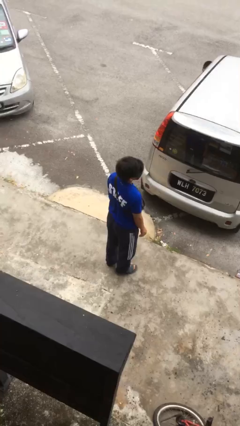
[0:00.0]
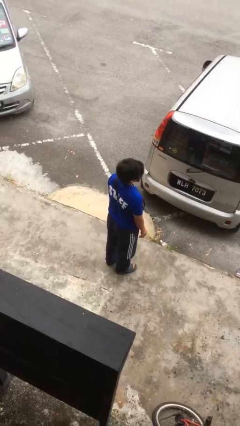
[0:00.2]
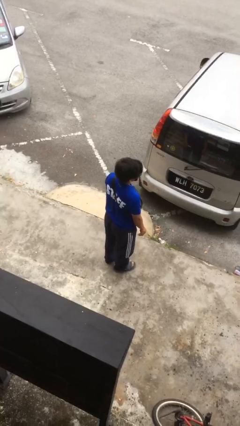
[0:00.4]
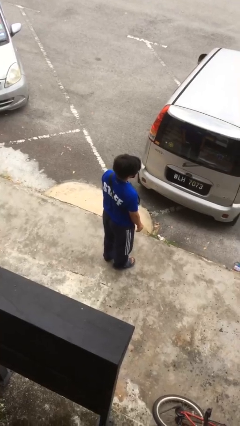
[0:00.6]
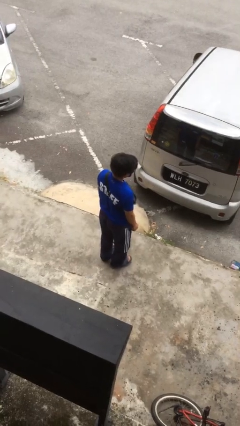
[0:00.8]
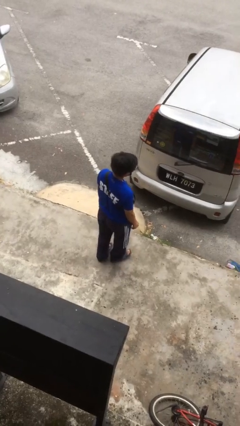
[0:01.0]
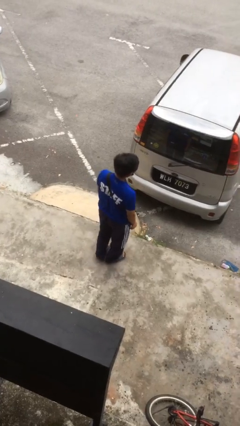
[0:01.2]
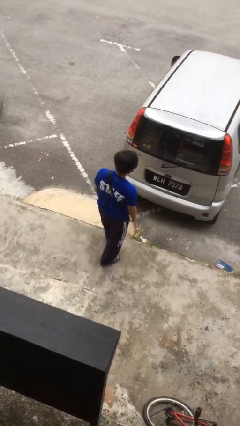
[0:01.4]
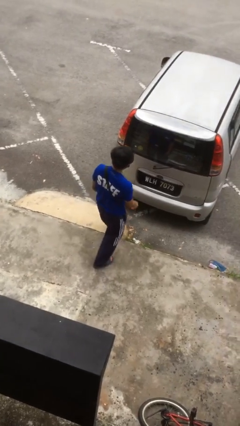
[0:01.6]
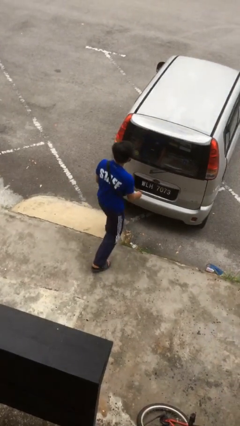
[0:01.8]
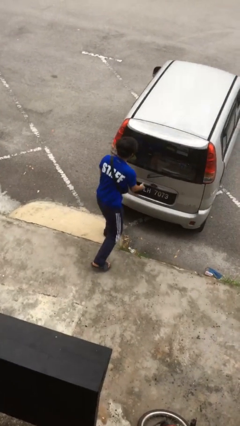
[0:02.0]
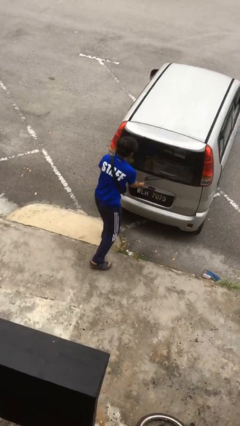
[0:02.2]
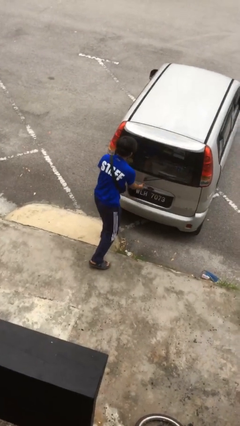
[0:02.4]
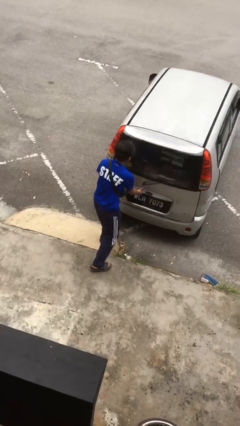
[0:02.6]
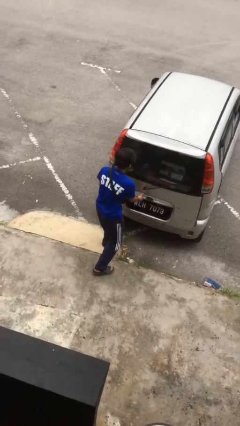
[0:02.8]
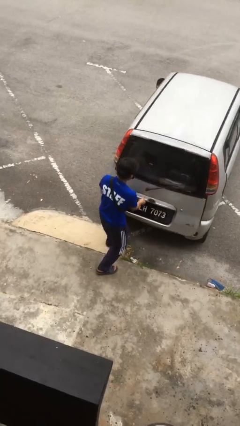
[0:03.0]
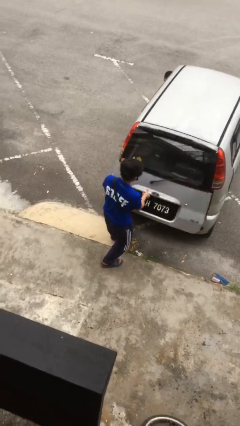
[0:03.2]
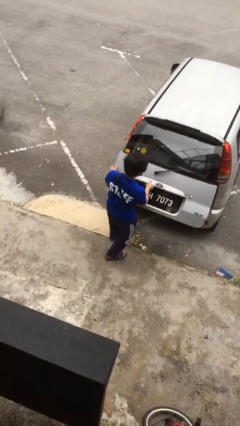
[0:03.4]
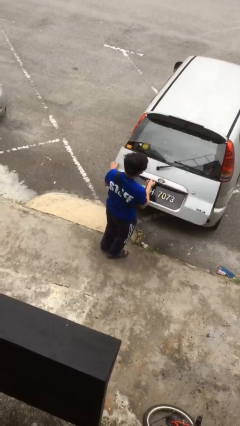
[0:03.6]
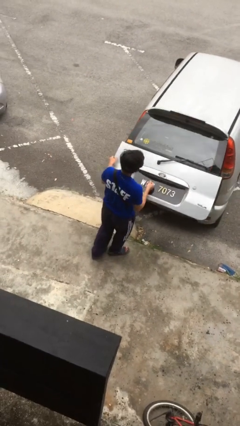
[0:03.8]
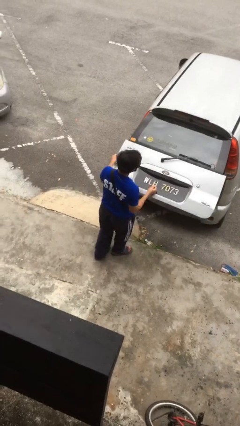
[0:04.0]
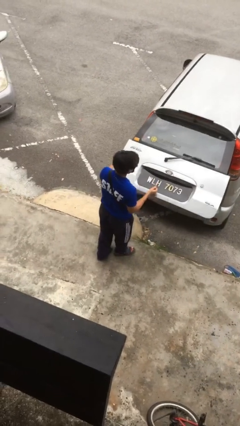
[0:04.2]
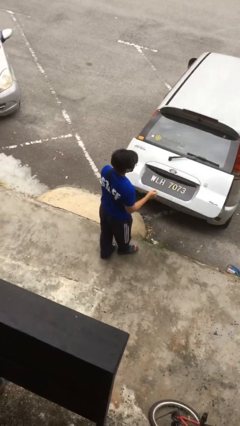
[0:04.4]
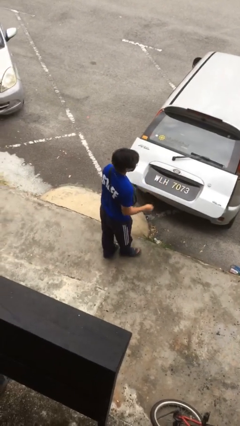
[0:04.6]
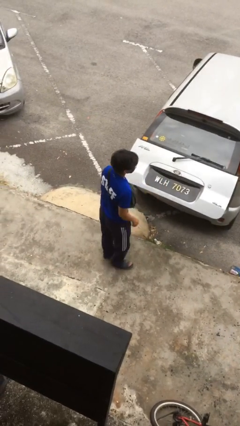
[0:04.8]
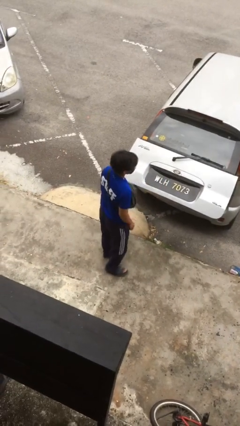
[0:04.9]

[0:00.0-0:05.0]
person opens car trunk

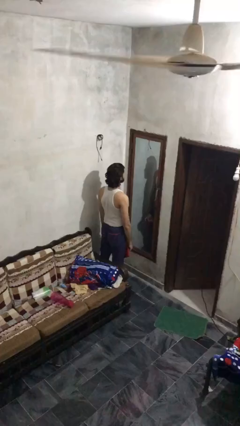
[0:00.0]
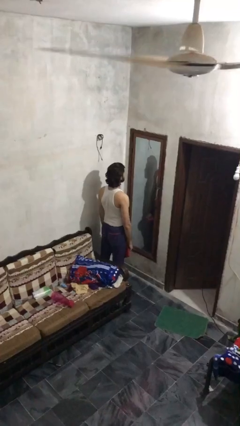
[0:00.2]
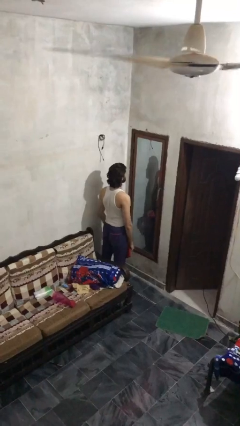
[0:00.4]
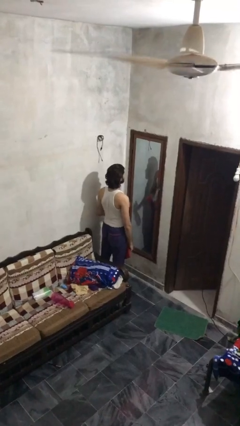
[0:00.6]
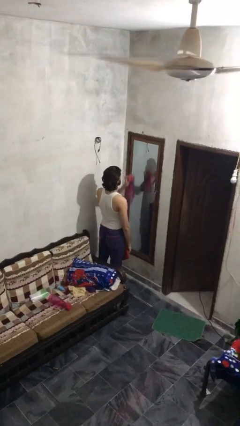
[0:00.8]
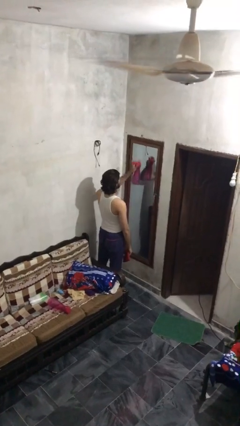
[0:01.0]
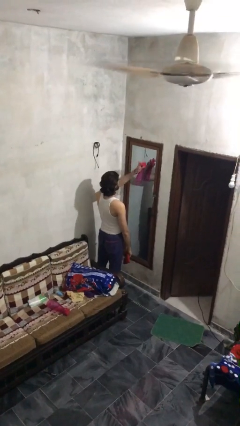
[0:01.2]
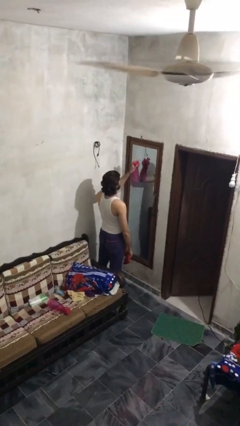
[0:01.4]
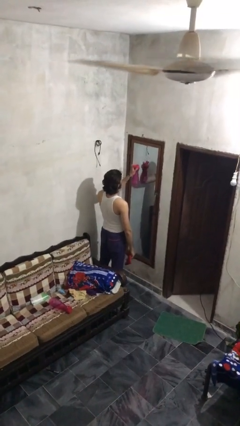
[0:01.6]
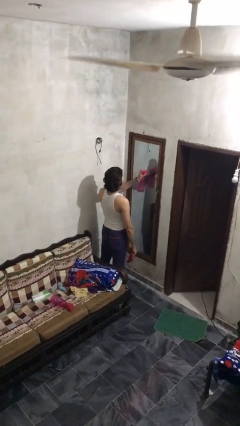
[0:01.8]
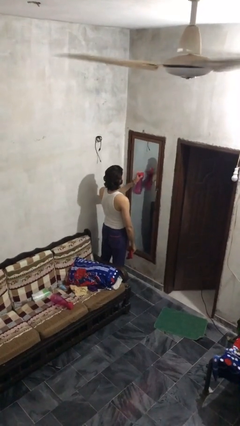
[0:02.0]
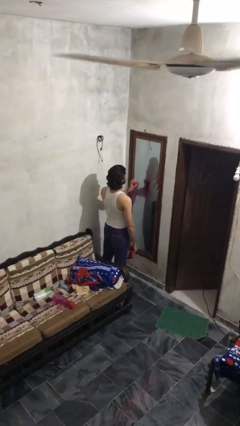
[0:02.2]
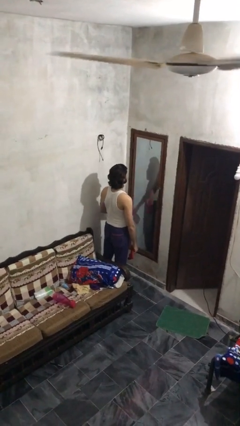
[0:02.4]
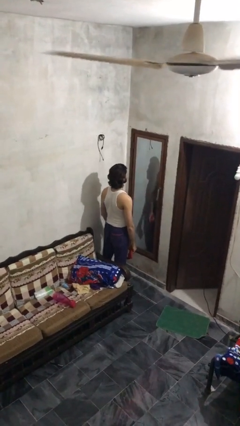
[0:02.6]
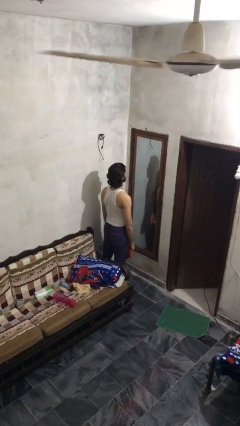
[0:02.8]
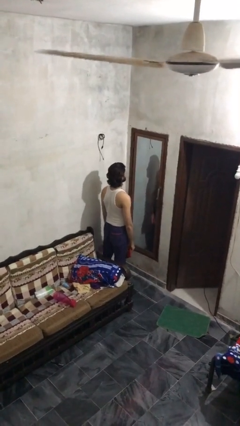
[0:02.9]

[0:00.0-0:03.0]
person sprays from bottle

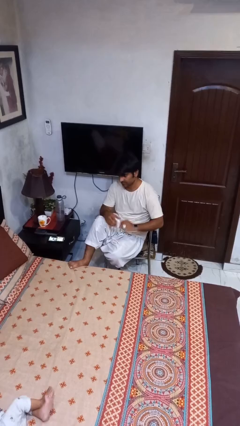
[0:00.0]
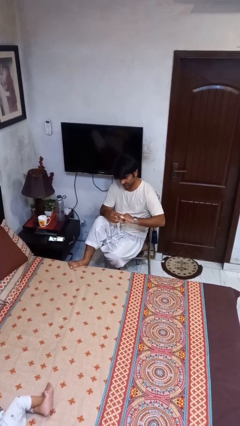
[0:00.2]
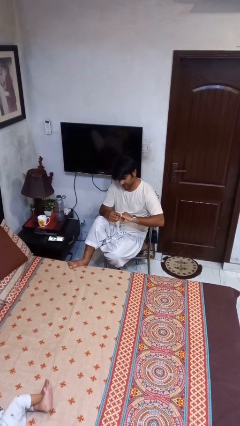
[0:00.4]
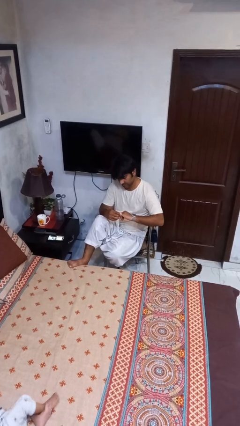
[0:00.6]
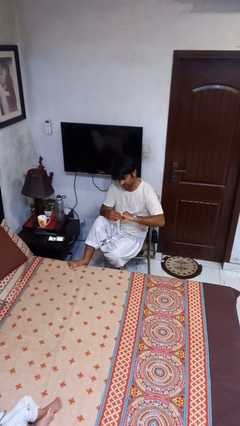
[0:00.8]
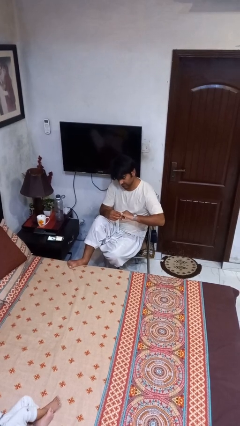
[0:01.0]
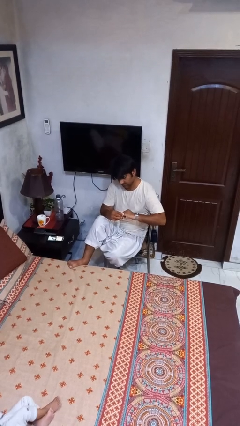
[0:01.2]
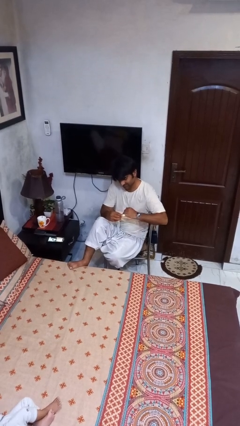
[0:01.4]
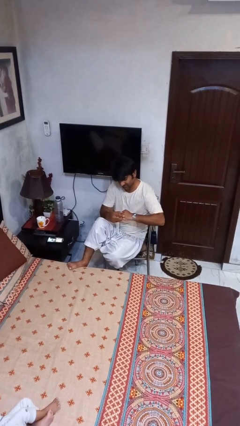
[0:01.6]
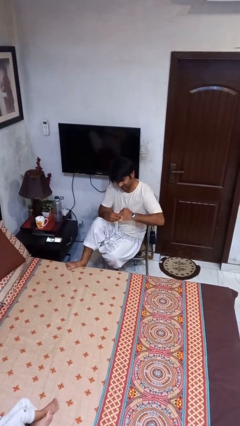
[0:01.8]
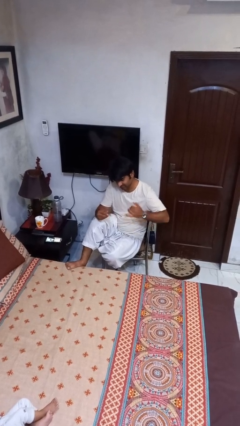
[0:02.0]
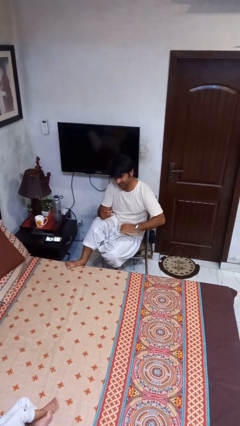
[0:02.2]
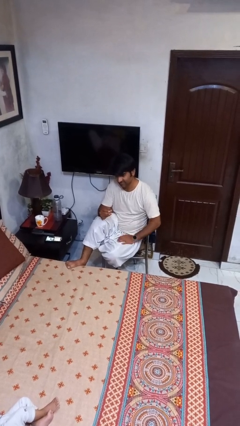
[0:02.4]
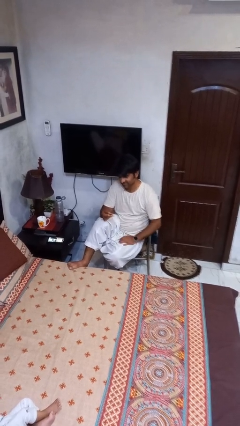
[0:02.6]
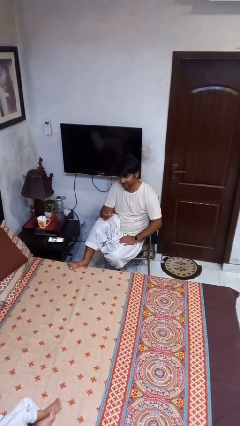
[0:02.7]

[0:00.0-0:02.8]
person takes off ring

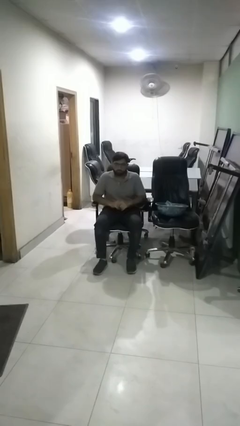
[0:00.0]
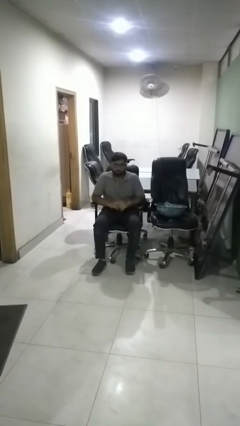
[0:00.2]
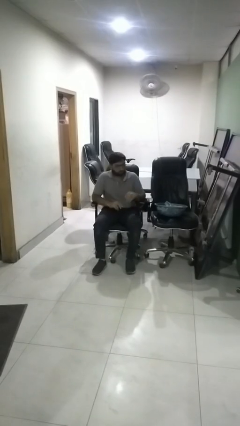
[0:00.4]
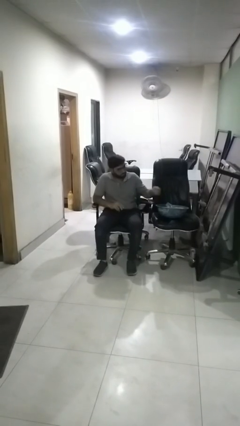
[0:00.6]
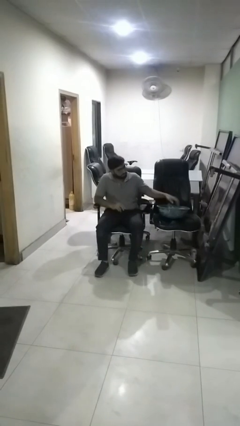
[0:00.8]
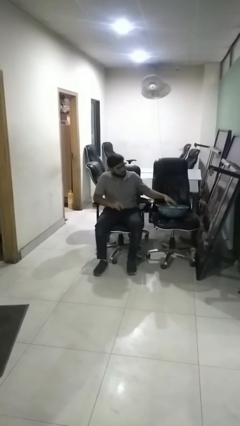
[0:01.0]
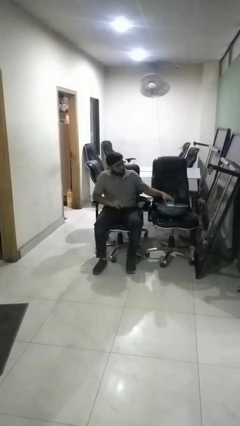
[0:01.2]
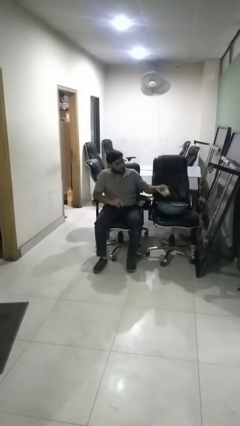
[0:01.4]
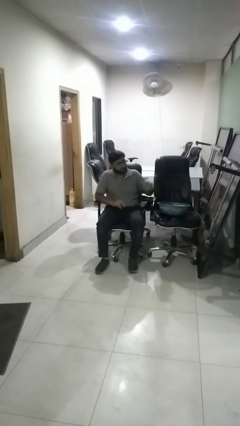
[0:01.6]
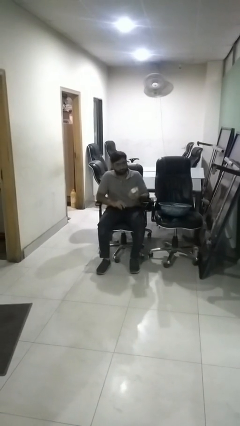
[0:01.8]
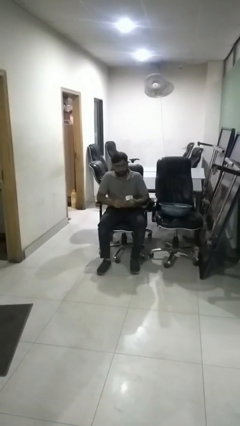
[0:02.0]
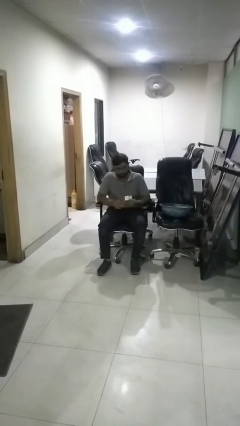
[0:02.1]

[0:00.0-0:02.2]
person takes object from basket

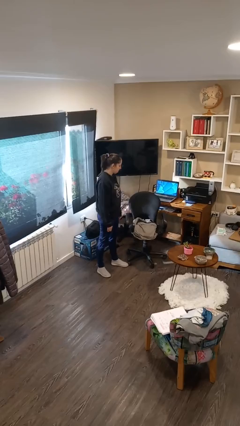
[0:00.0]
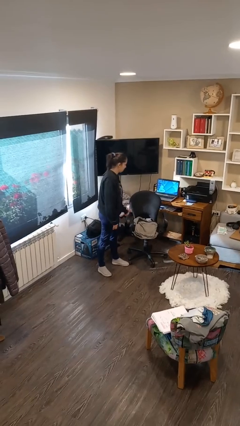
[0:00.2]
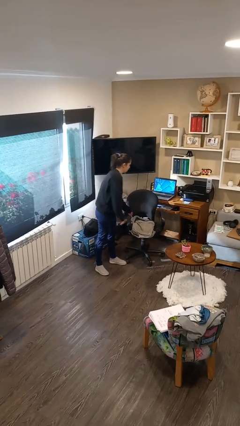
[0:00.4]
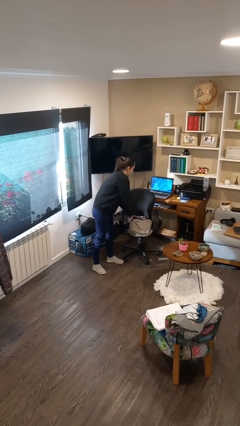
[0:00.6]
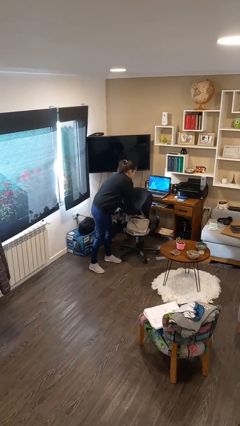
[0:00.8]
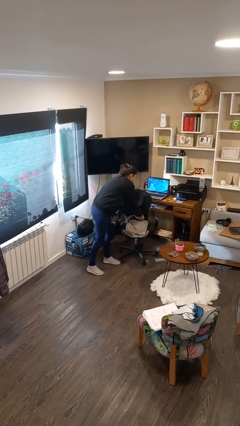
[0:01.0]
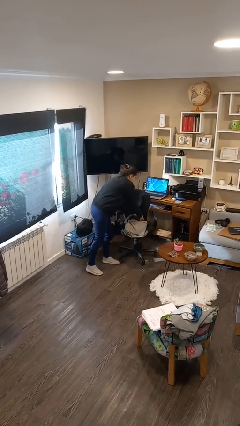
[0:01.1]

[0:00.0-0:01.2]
person searches in backpack

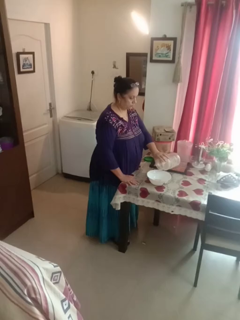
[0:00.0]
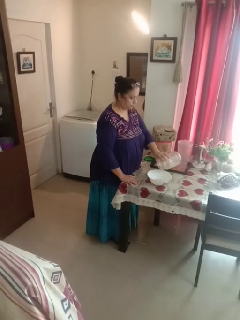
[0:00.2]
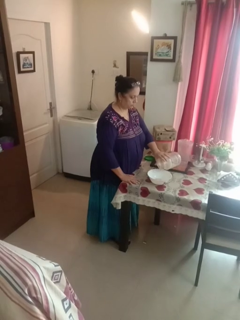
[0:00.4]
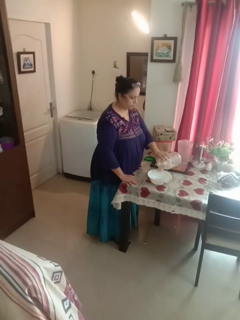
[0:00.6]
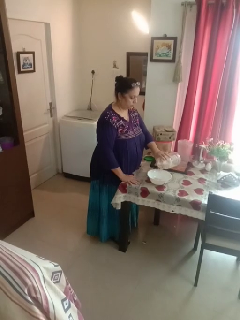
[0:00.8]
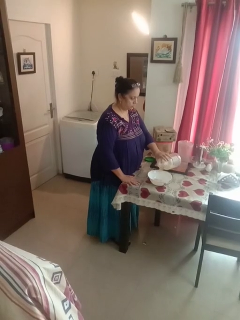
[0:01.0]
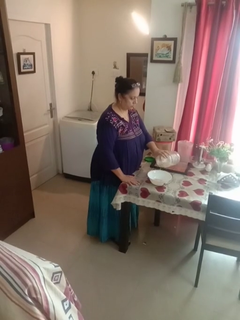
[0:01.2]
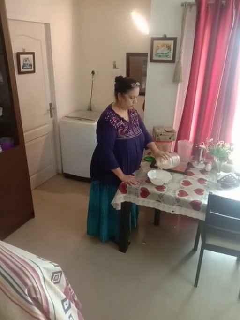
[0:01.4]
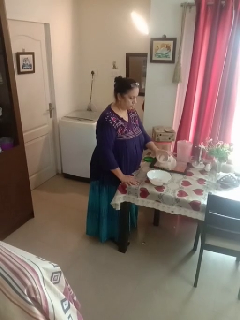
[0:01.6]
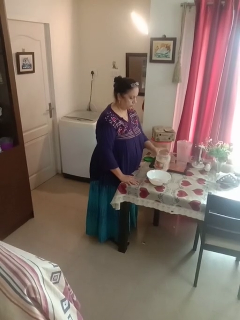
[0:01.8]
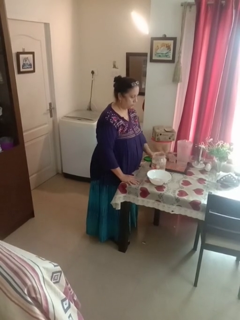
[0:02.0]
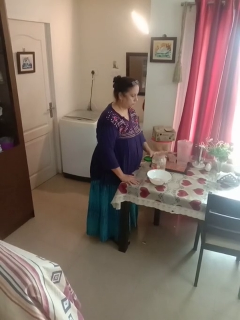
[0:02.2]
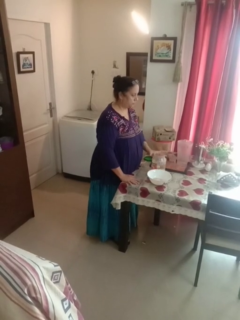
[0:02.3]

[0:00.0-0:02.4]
person pours into bowl

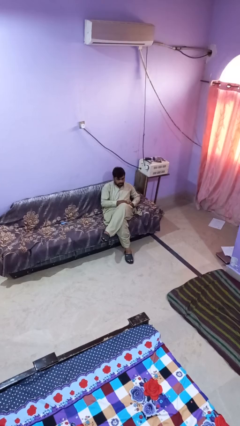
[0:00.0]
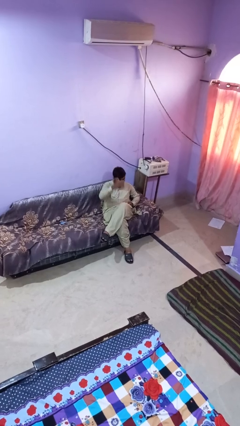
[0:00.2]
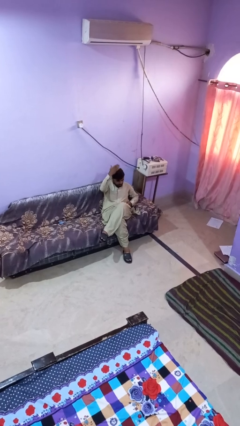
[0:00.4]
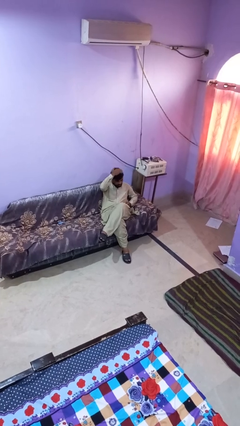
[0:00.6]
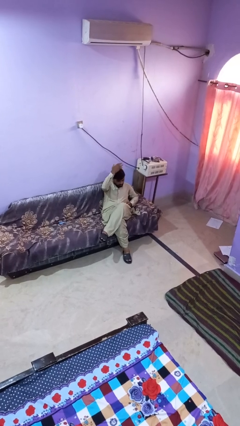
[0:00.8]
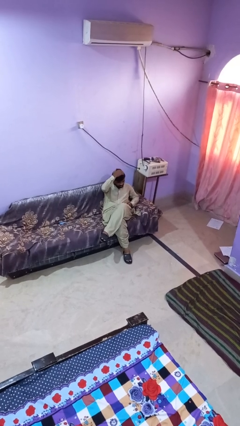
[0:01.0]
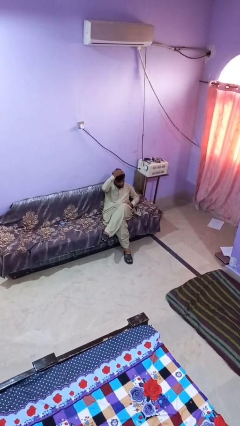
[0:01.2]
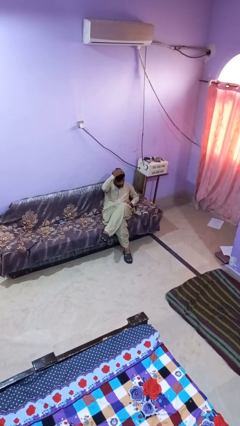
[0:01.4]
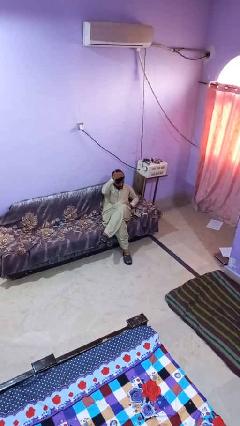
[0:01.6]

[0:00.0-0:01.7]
person pats head
